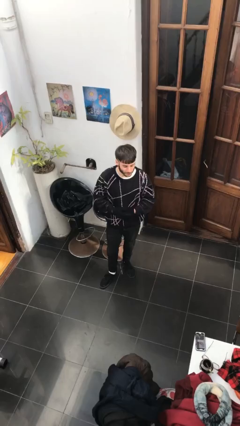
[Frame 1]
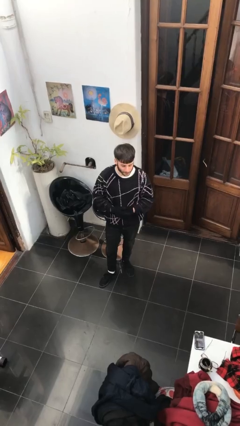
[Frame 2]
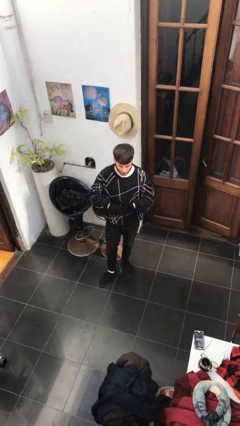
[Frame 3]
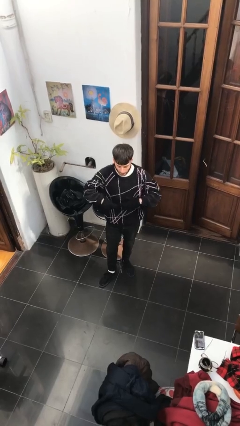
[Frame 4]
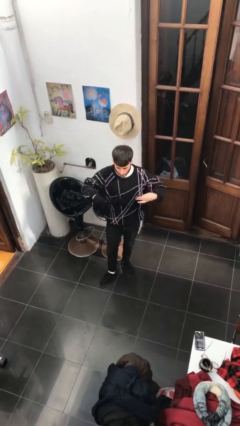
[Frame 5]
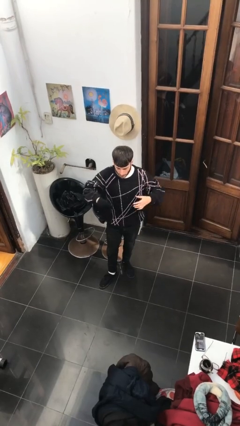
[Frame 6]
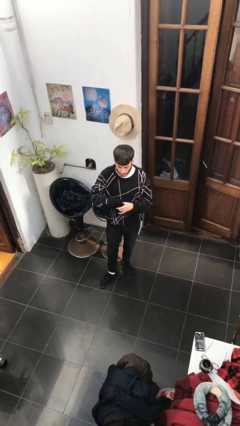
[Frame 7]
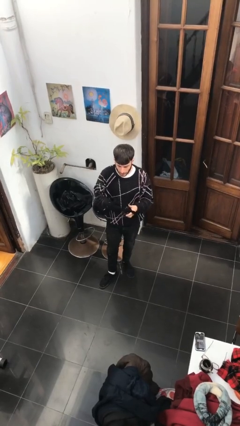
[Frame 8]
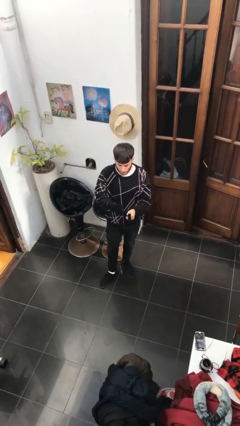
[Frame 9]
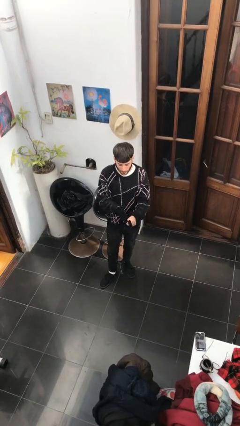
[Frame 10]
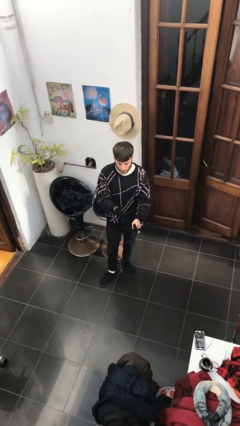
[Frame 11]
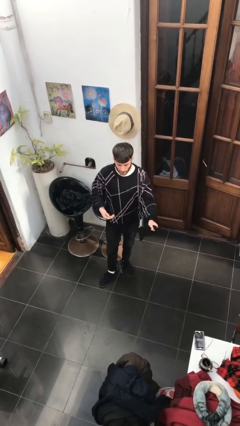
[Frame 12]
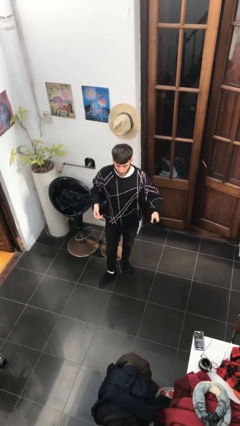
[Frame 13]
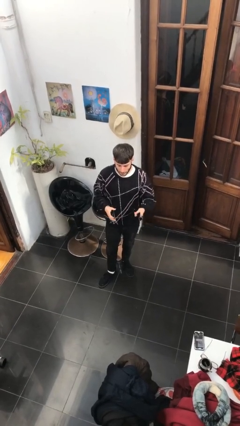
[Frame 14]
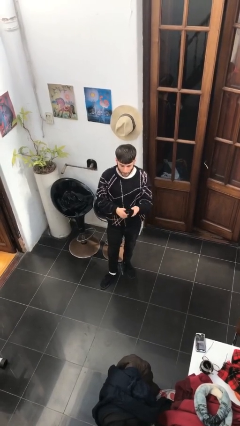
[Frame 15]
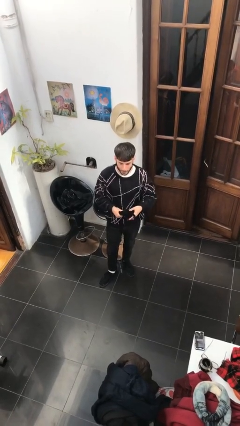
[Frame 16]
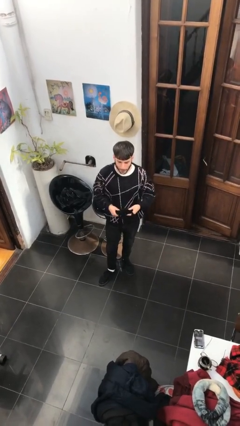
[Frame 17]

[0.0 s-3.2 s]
person takes off gloves

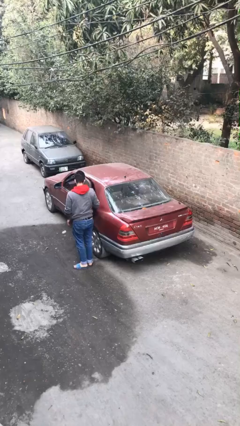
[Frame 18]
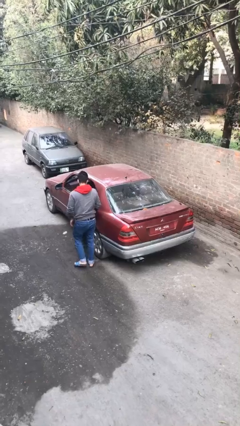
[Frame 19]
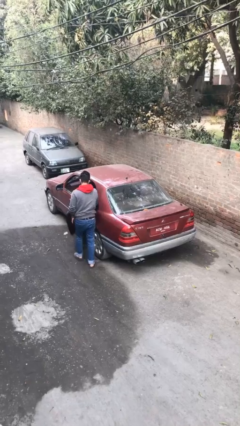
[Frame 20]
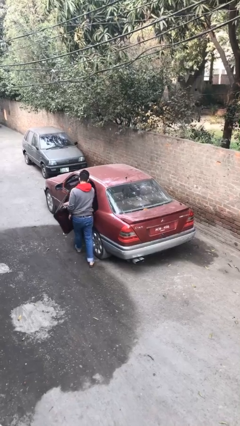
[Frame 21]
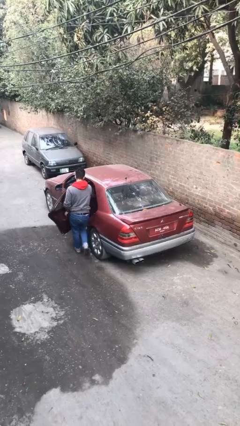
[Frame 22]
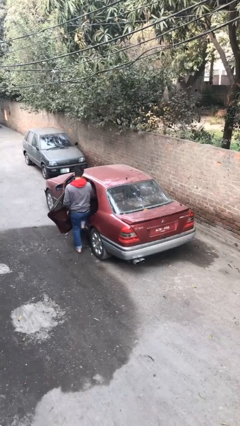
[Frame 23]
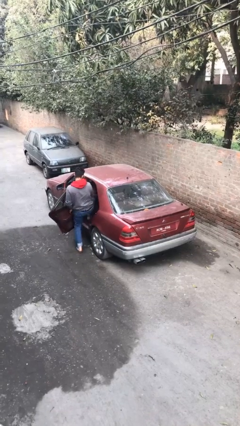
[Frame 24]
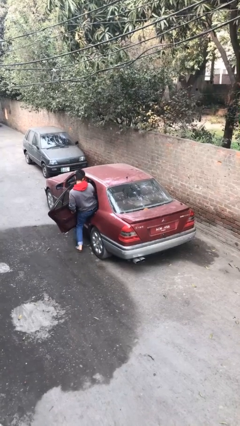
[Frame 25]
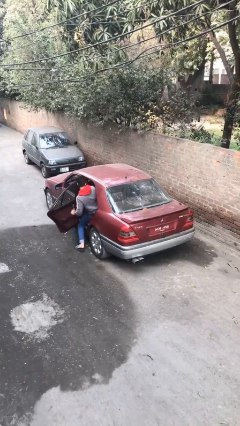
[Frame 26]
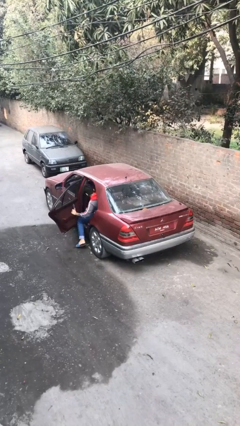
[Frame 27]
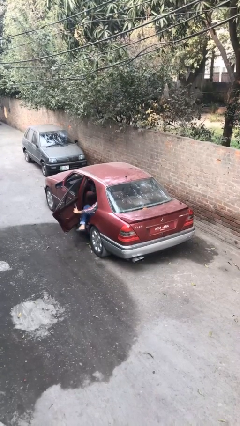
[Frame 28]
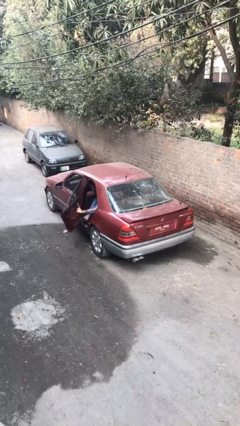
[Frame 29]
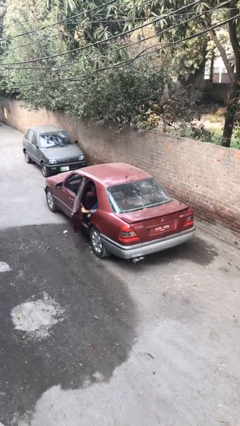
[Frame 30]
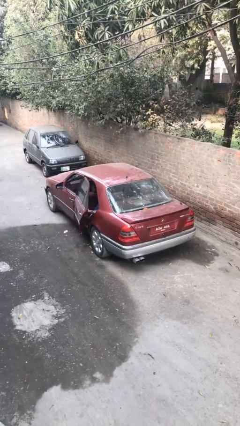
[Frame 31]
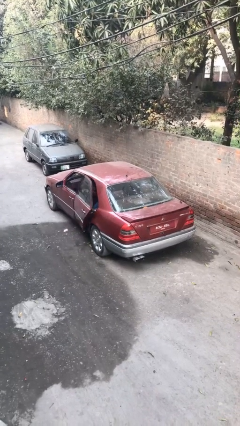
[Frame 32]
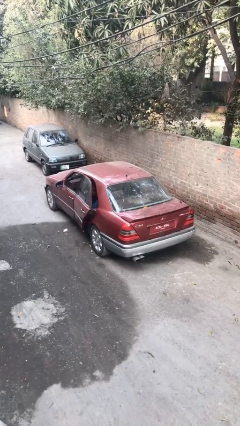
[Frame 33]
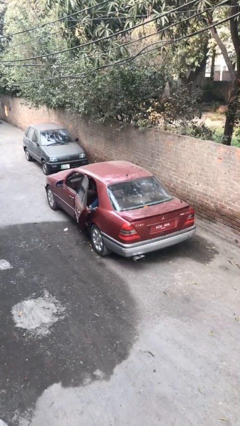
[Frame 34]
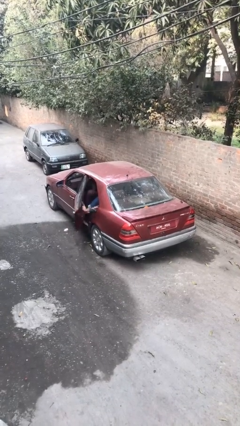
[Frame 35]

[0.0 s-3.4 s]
car picks up person

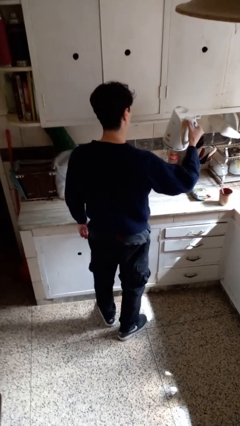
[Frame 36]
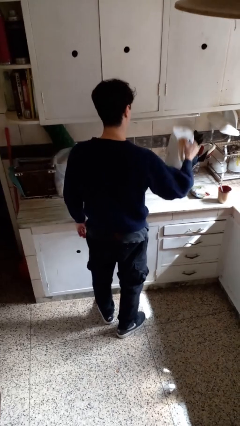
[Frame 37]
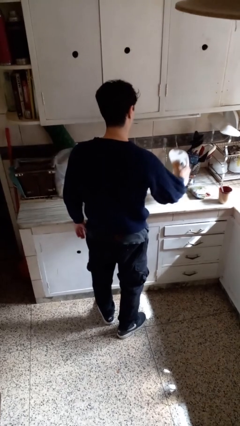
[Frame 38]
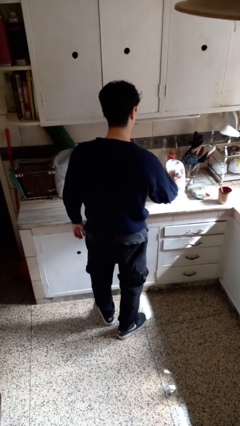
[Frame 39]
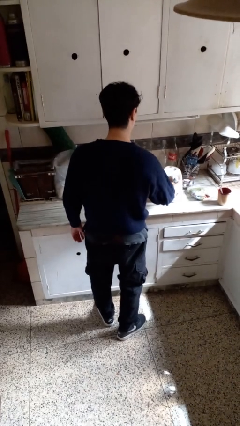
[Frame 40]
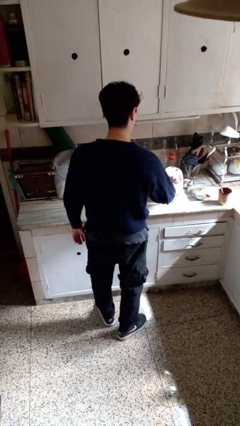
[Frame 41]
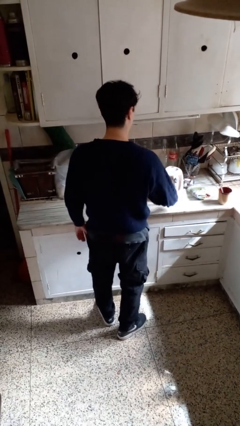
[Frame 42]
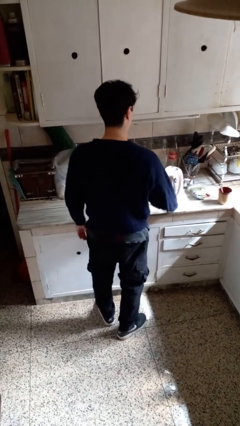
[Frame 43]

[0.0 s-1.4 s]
person puts down object on countertop

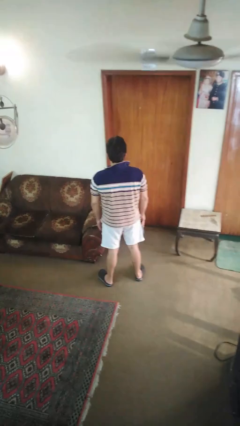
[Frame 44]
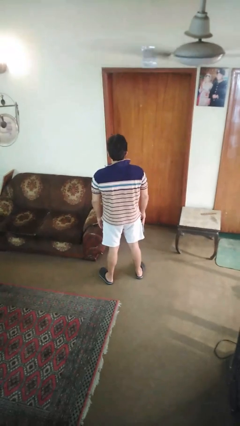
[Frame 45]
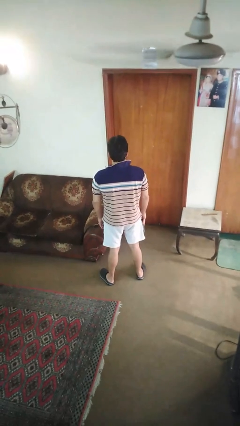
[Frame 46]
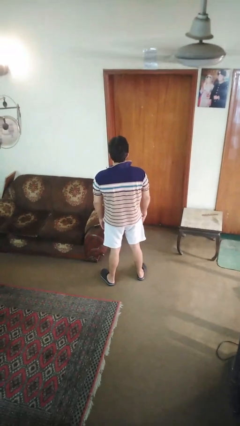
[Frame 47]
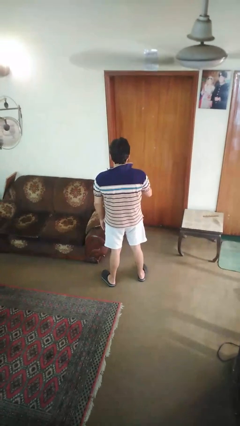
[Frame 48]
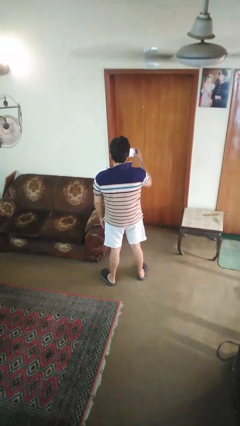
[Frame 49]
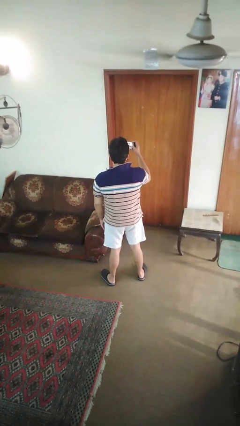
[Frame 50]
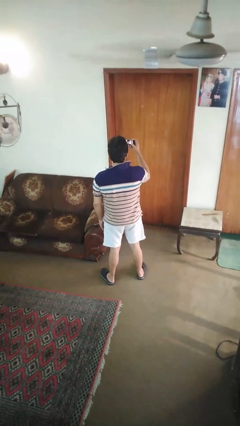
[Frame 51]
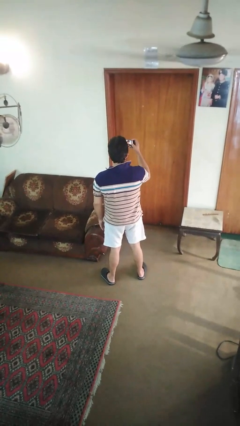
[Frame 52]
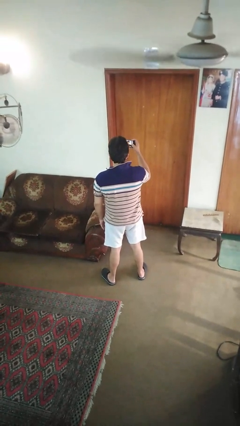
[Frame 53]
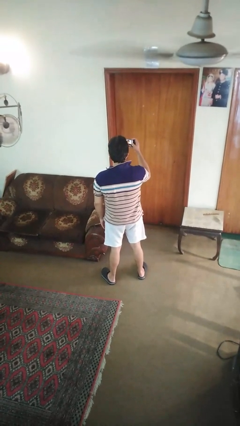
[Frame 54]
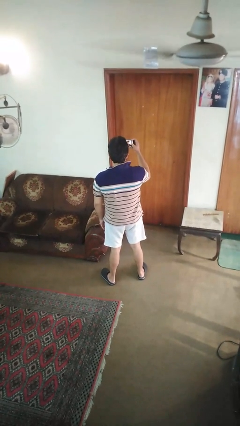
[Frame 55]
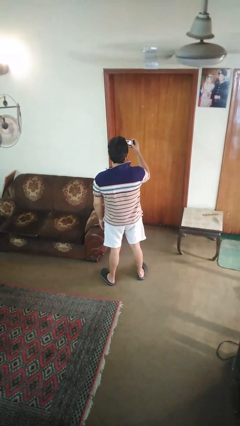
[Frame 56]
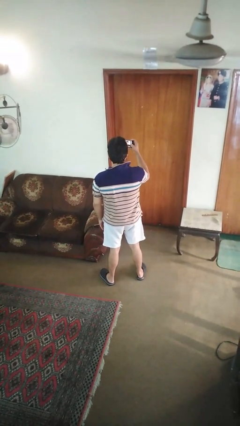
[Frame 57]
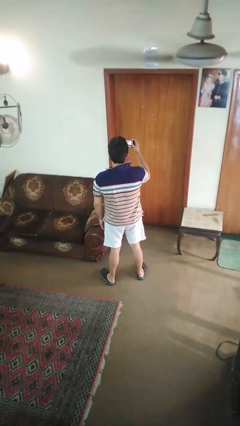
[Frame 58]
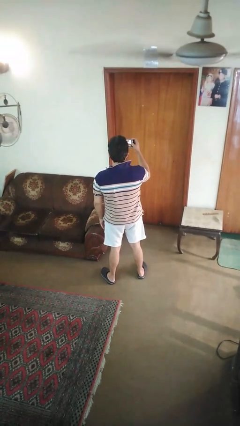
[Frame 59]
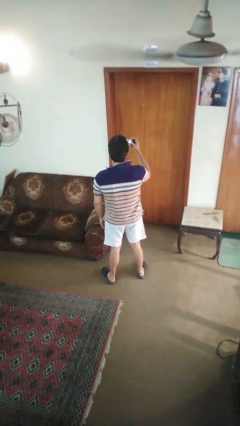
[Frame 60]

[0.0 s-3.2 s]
person takes selfie

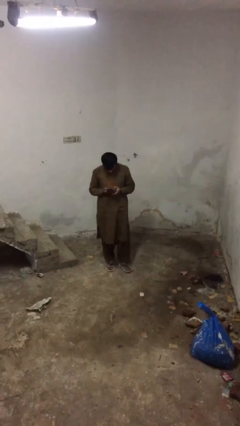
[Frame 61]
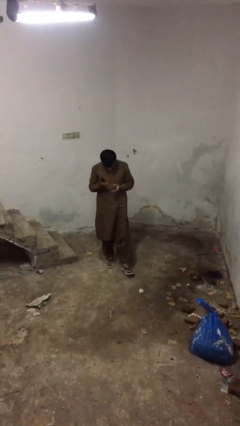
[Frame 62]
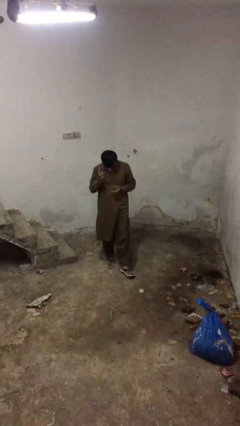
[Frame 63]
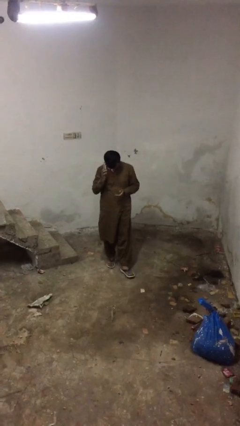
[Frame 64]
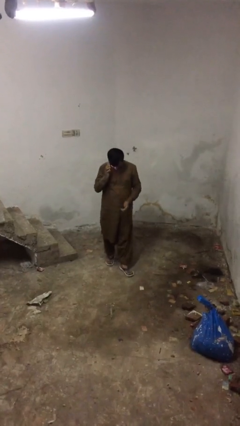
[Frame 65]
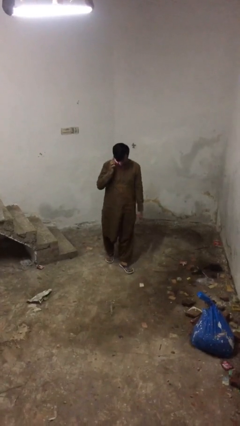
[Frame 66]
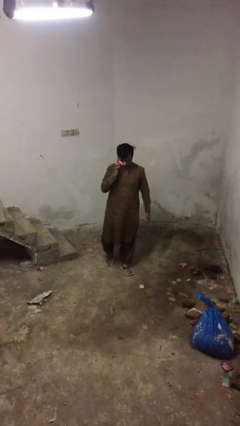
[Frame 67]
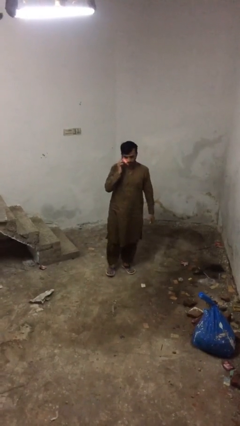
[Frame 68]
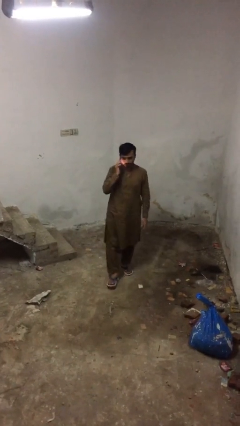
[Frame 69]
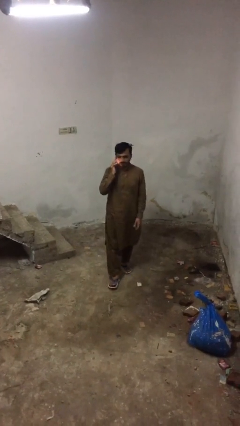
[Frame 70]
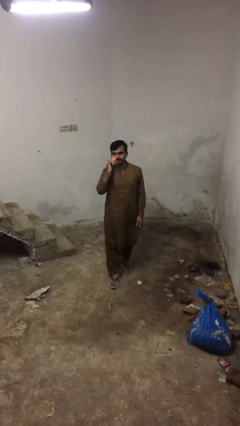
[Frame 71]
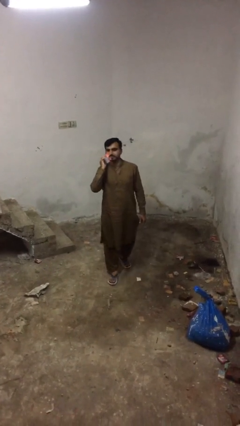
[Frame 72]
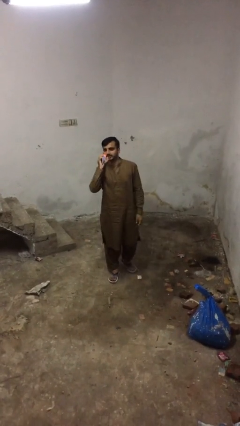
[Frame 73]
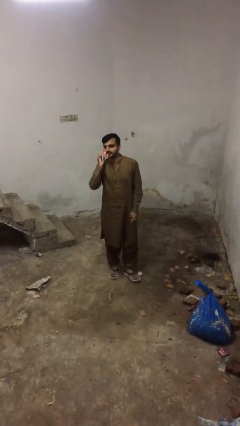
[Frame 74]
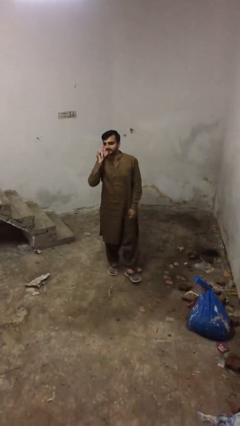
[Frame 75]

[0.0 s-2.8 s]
person talks on phone

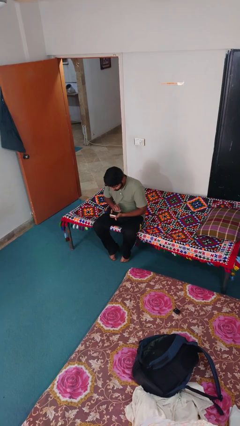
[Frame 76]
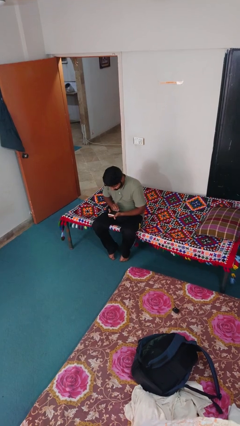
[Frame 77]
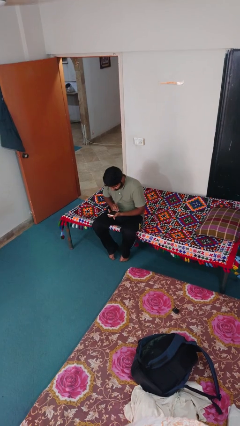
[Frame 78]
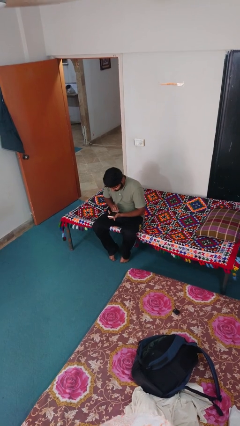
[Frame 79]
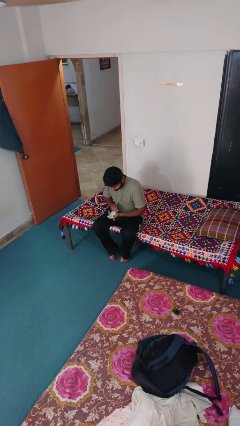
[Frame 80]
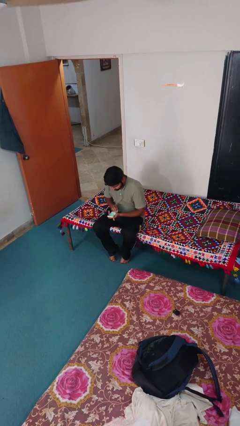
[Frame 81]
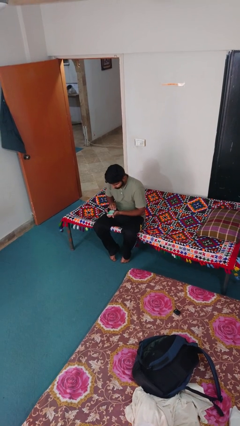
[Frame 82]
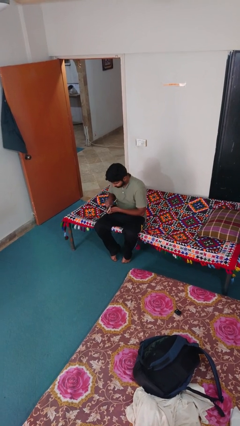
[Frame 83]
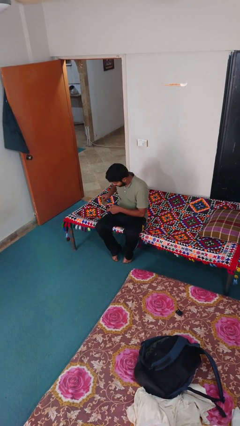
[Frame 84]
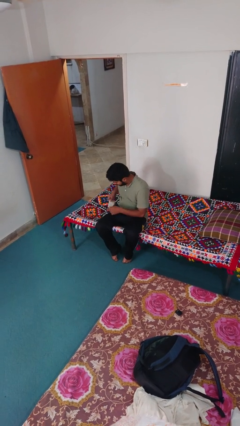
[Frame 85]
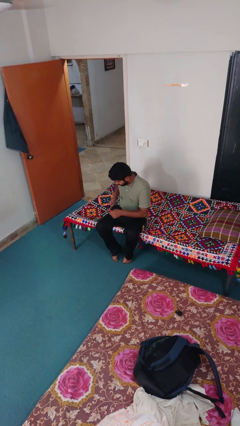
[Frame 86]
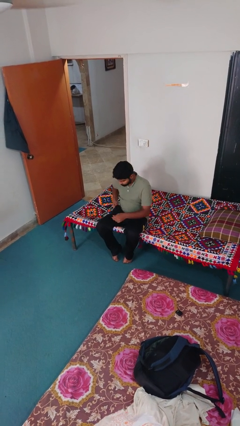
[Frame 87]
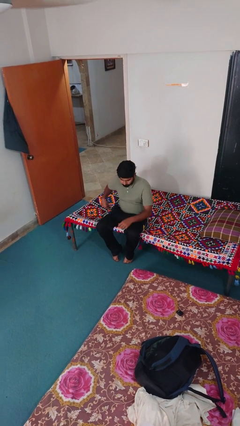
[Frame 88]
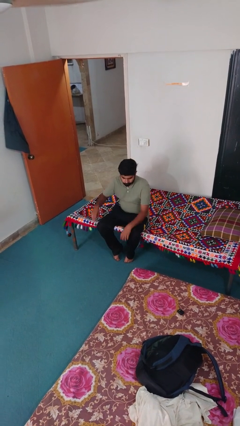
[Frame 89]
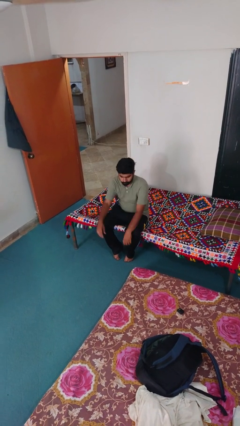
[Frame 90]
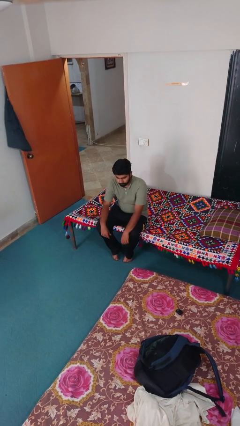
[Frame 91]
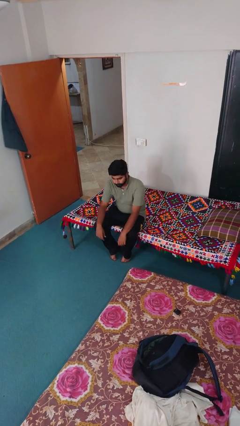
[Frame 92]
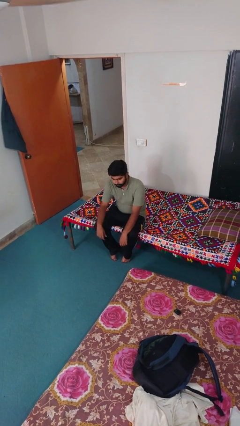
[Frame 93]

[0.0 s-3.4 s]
person puts phone into pocket
